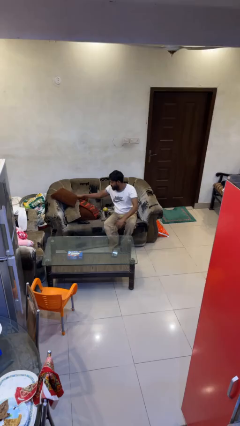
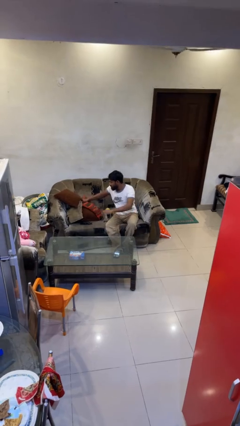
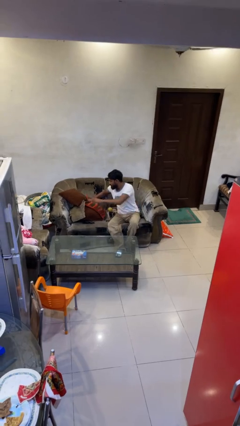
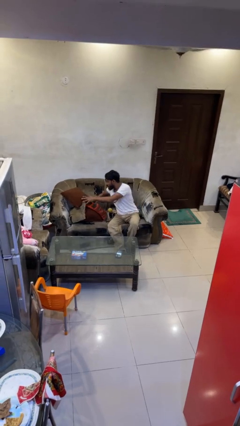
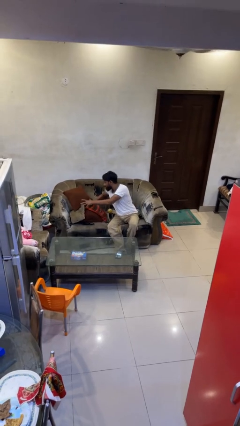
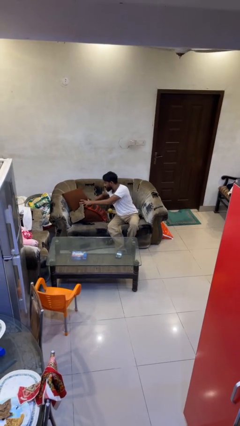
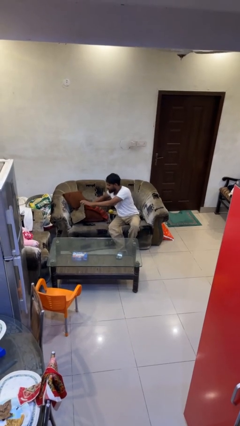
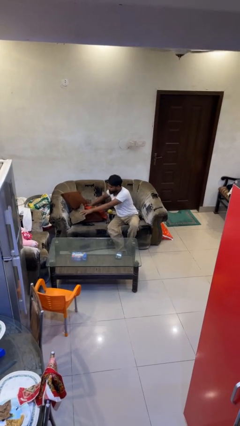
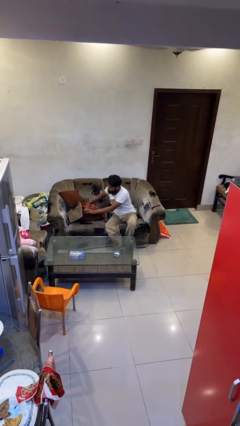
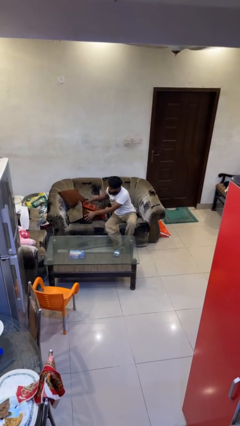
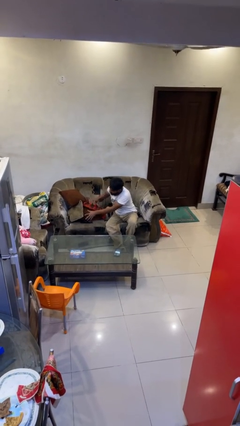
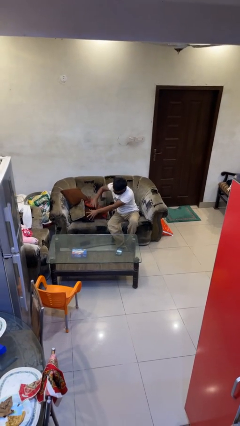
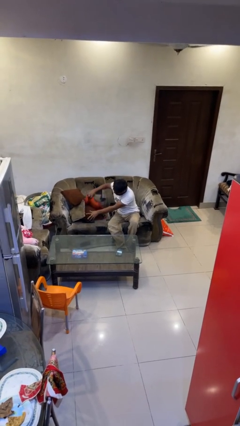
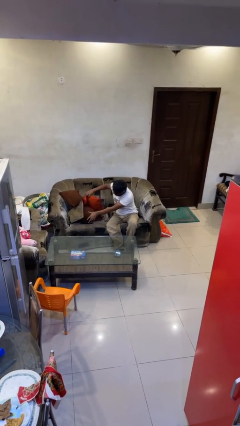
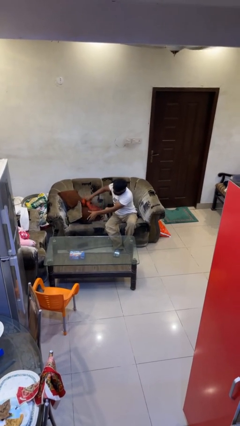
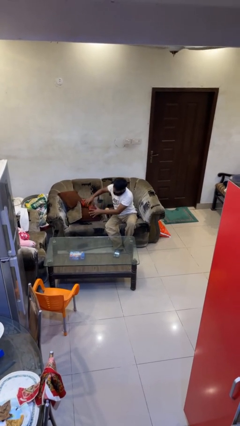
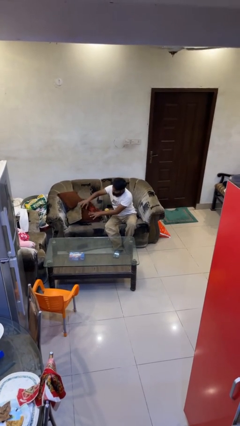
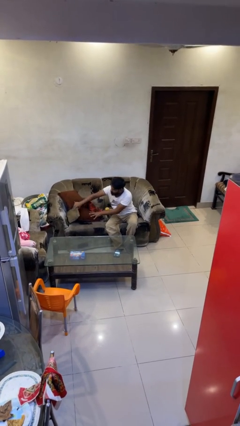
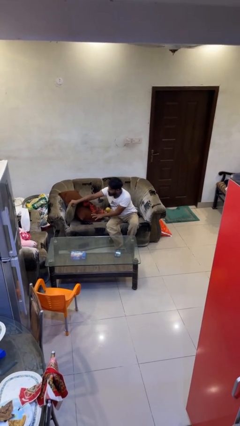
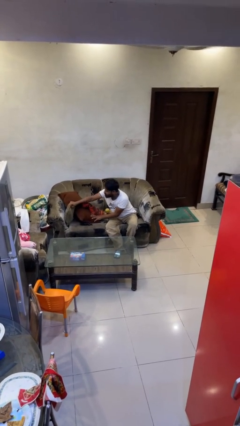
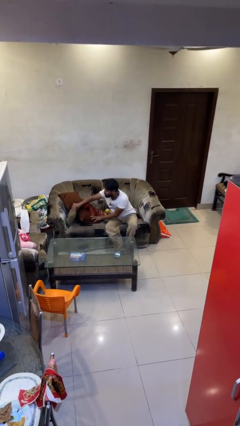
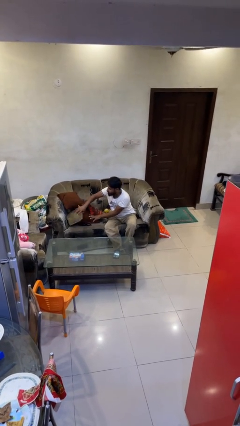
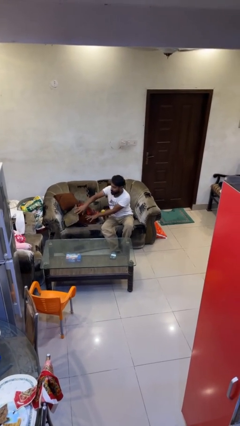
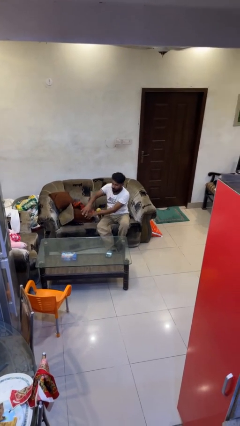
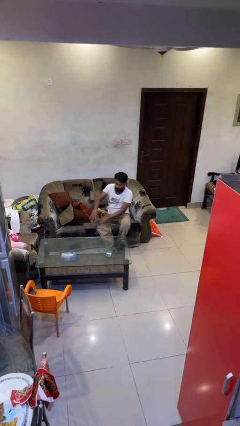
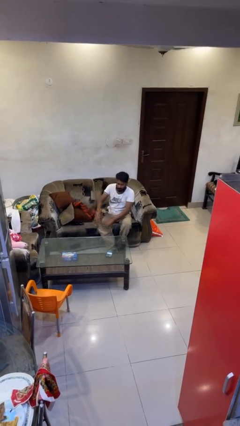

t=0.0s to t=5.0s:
person searches in couch

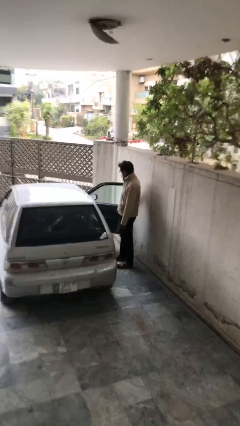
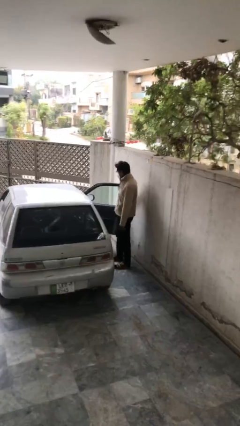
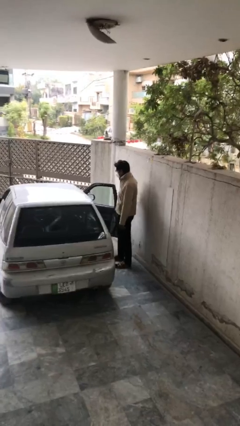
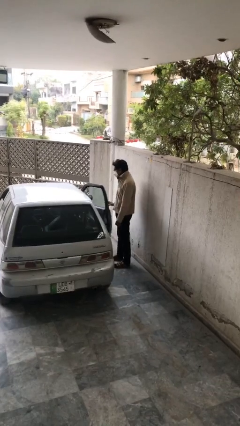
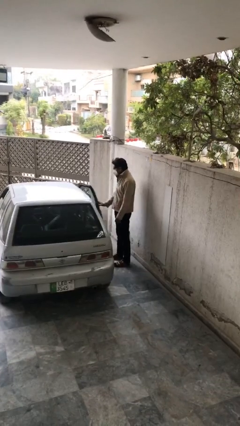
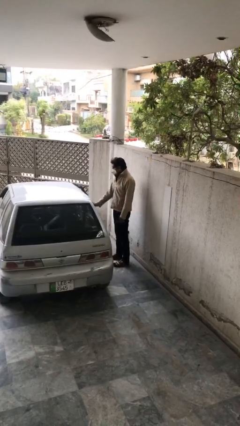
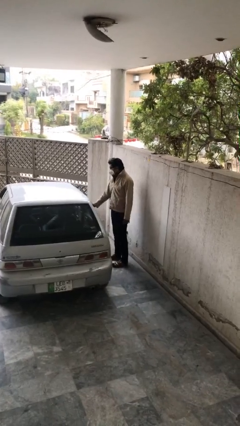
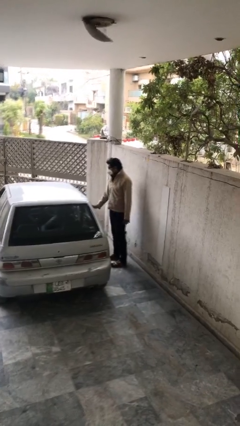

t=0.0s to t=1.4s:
person closes car door

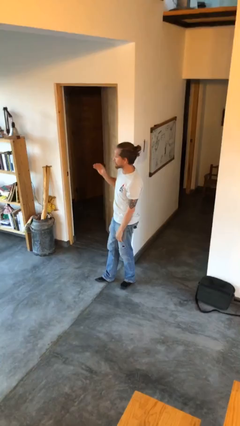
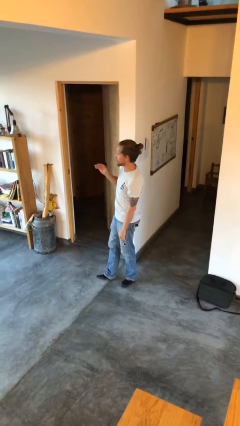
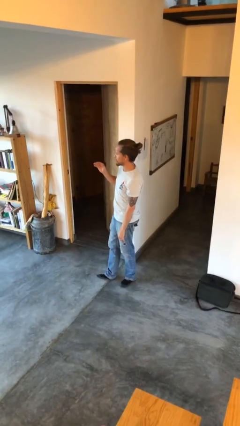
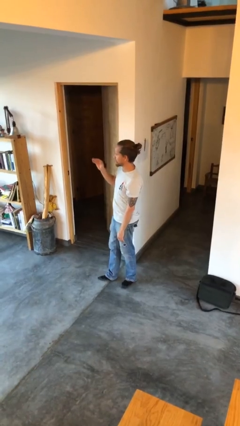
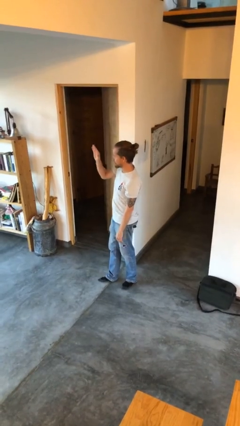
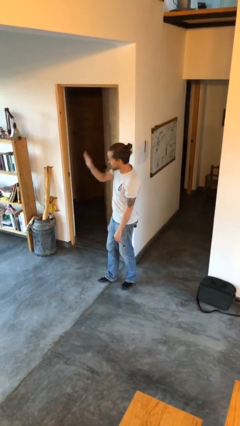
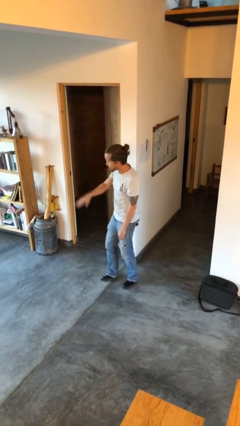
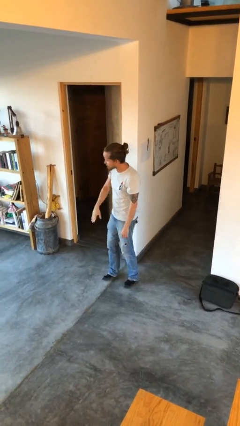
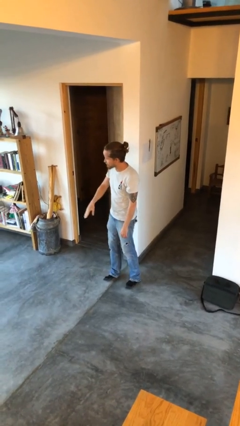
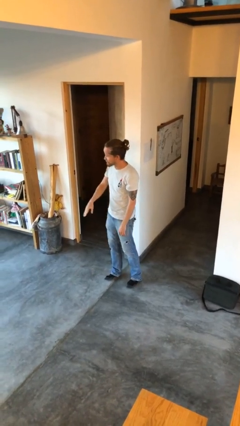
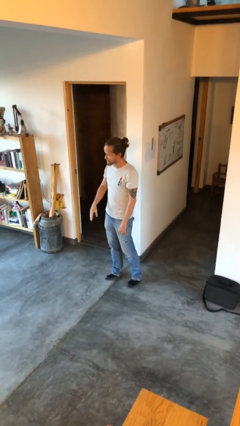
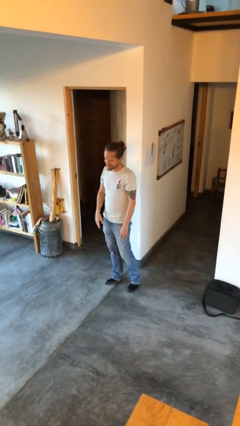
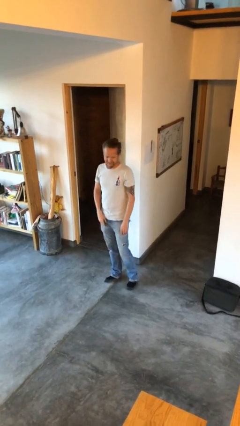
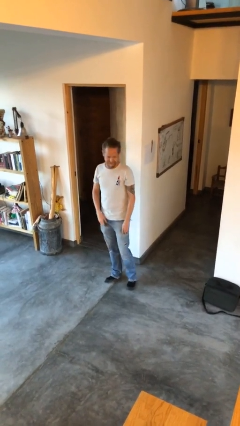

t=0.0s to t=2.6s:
person gestures swipe down

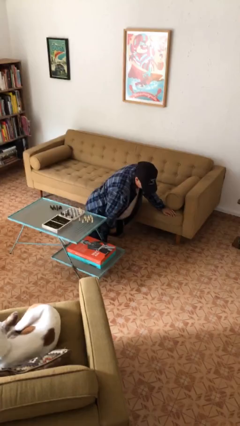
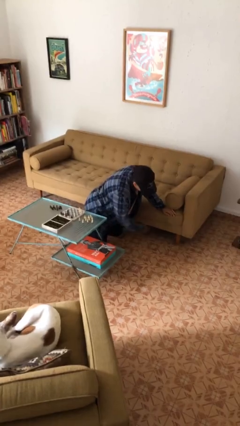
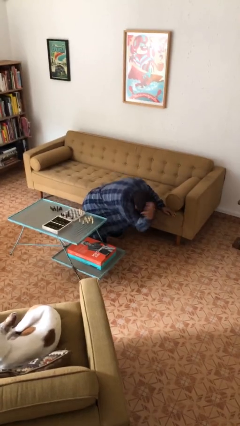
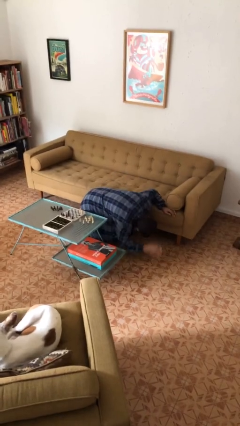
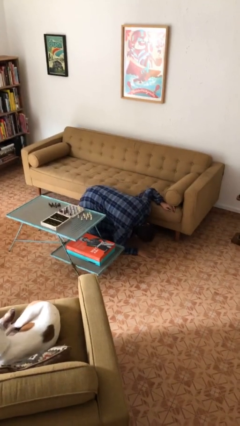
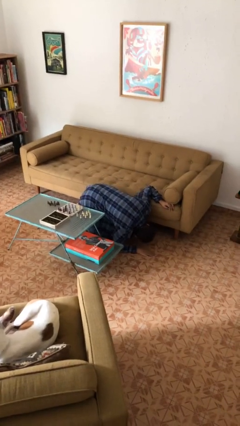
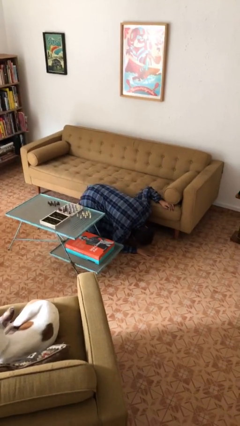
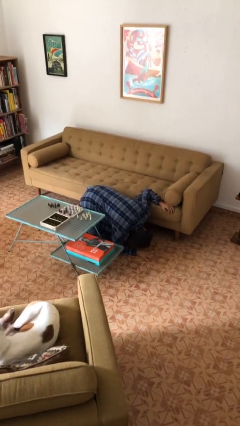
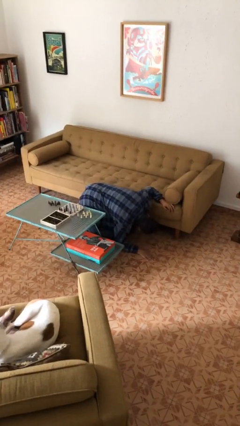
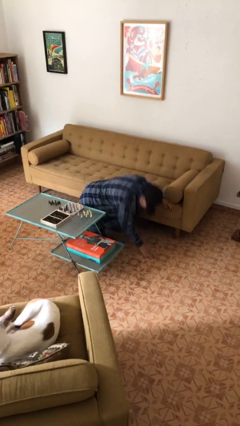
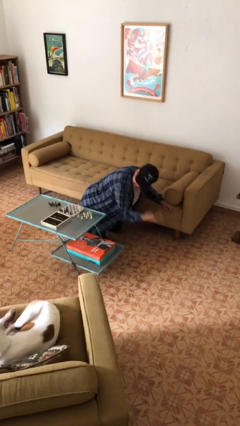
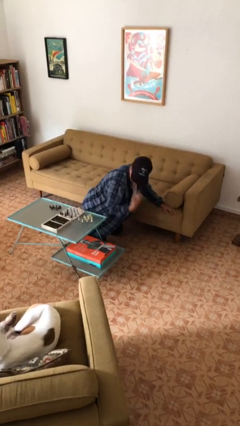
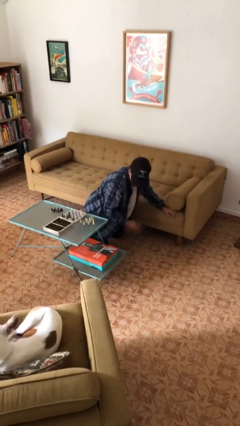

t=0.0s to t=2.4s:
person searches under couch

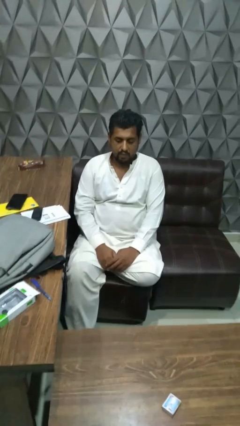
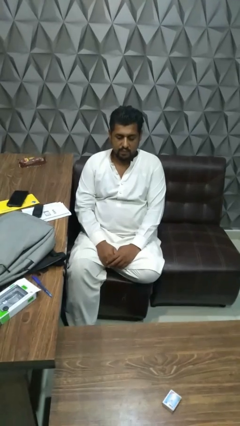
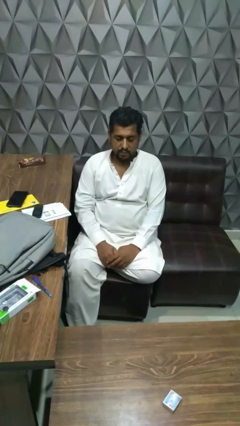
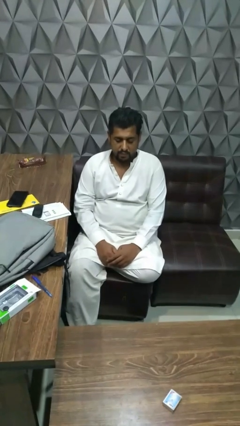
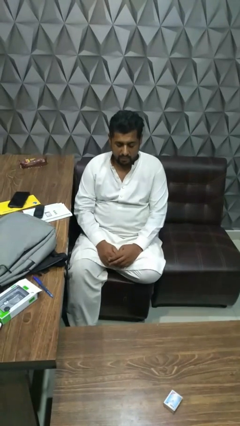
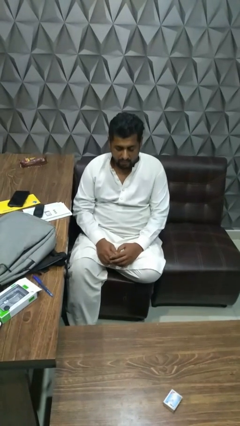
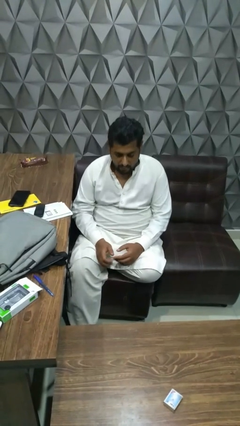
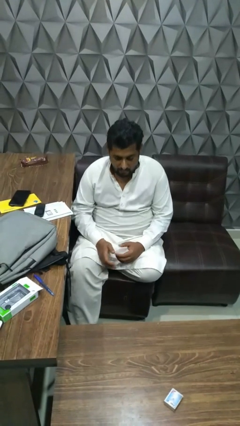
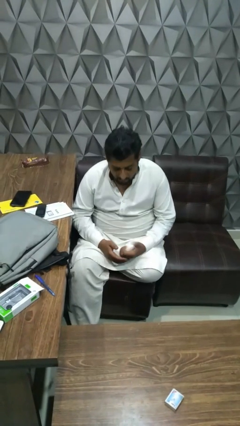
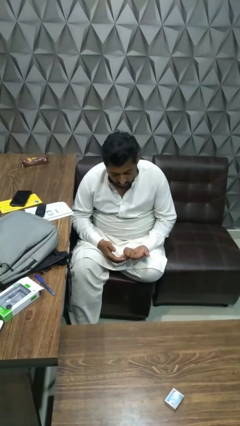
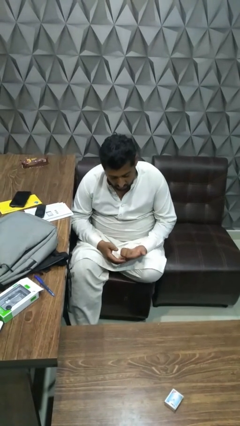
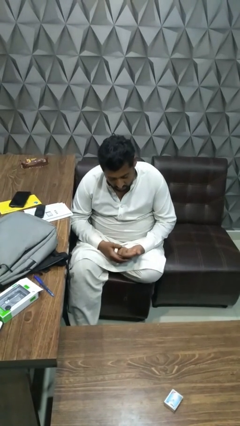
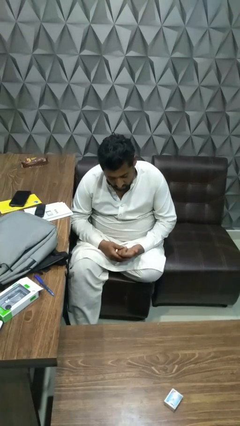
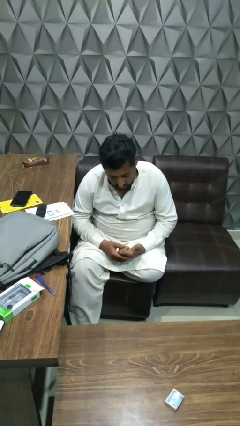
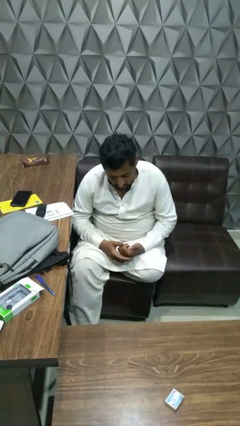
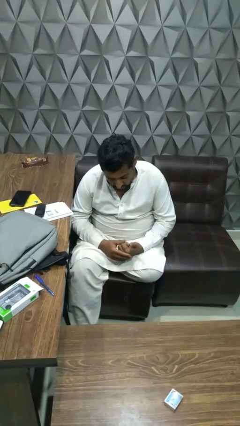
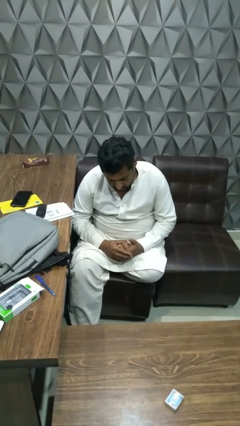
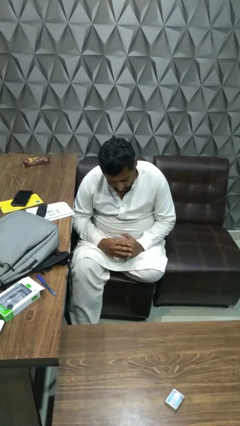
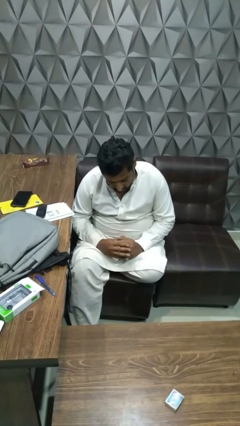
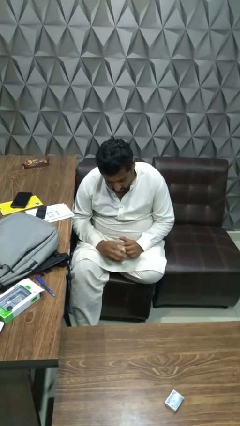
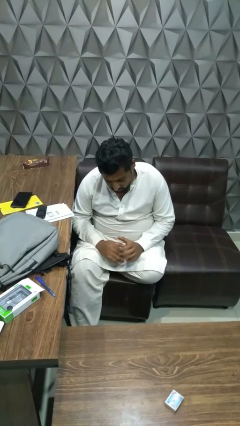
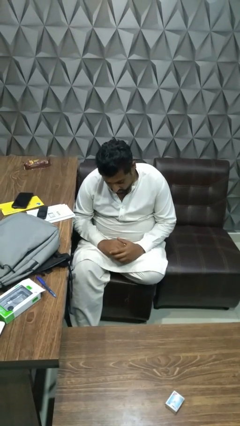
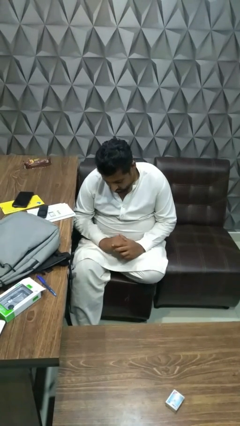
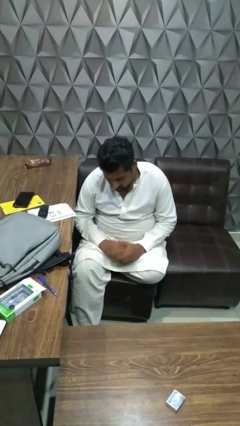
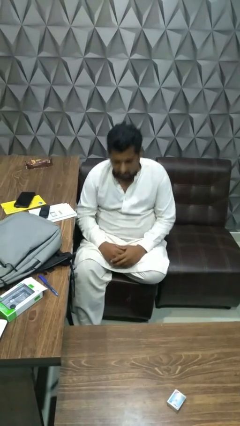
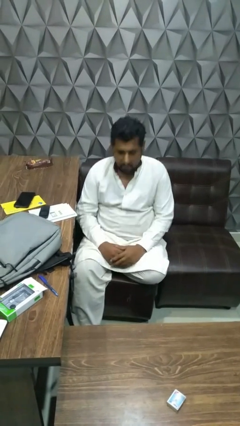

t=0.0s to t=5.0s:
person looks at hands in lap

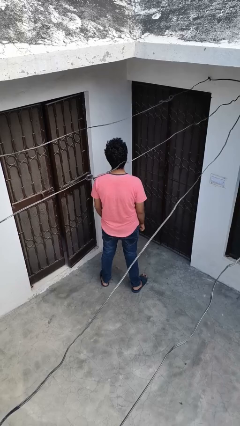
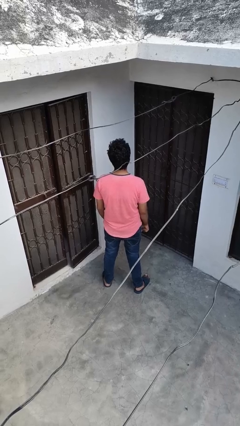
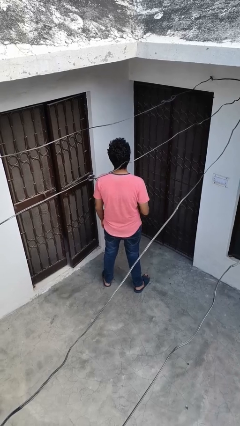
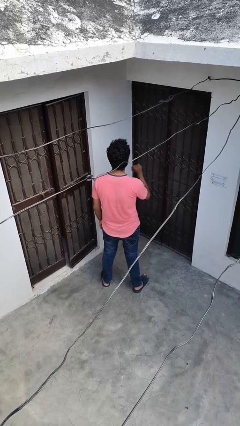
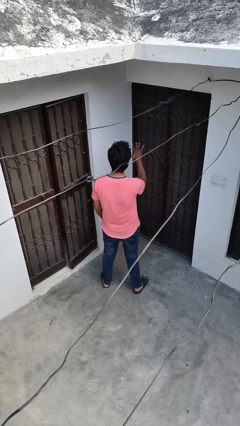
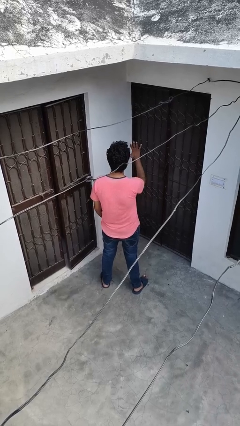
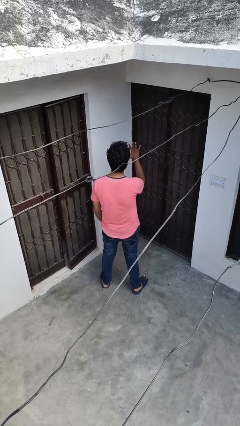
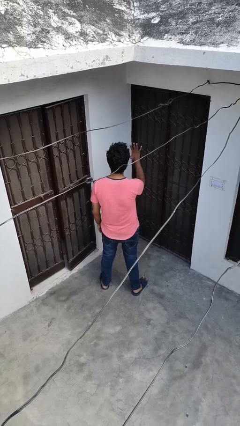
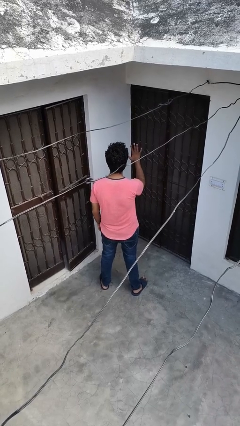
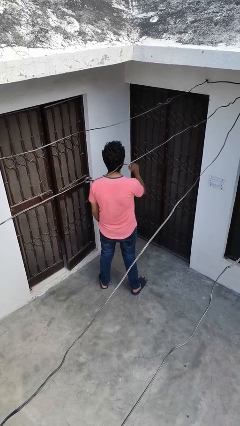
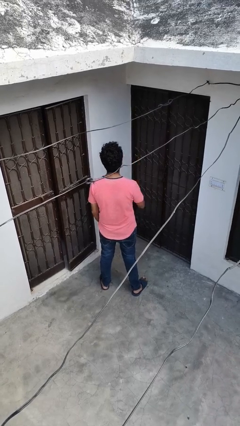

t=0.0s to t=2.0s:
person gestures number five
